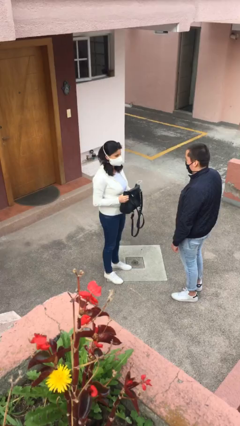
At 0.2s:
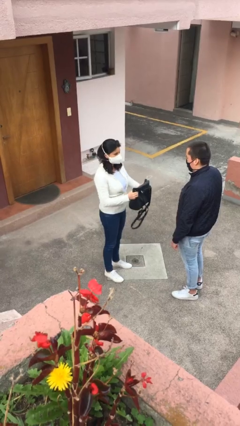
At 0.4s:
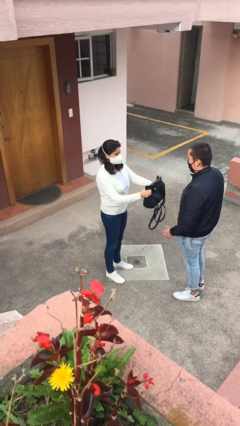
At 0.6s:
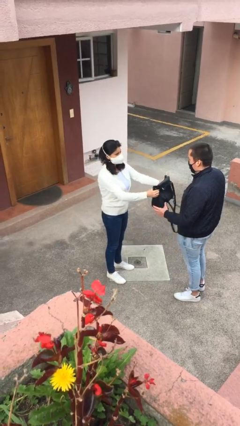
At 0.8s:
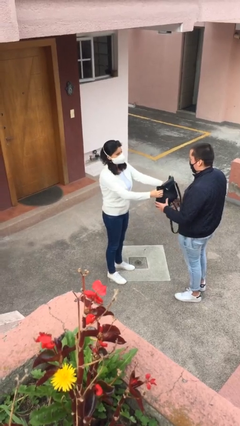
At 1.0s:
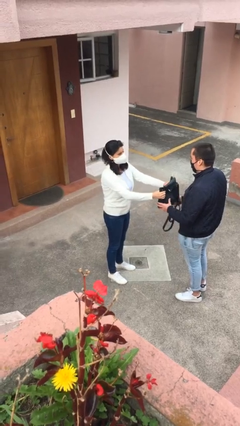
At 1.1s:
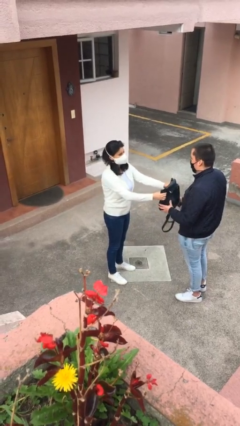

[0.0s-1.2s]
person transfers object to person

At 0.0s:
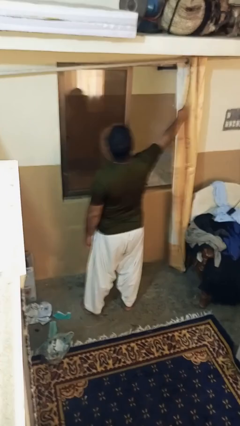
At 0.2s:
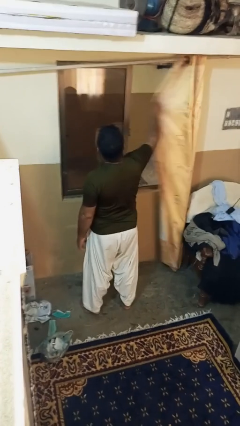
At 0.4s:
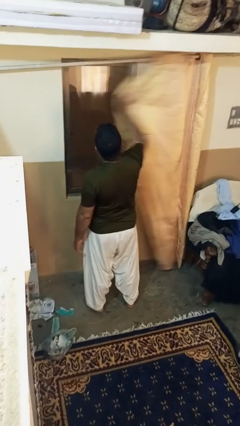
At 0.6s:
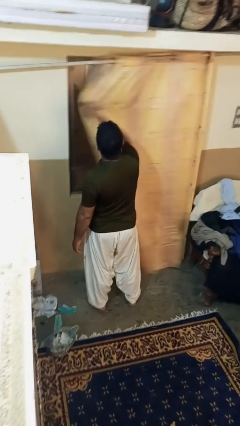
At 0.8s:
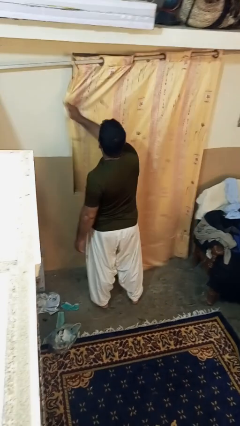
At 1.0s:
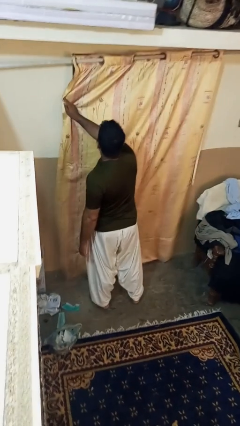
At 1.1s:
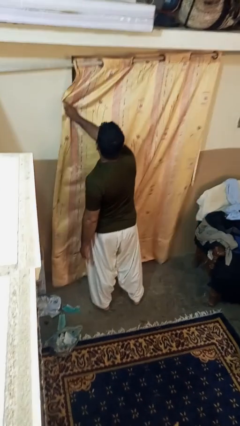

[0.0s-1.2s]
person closes curtains

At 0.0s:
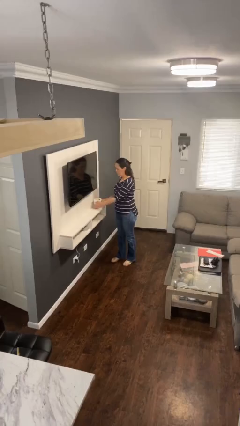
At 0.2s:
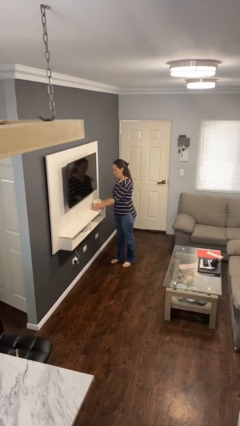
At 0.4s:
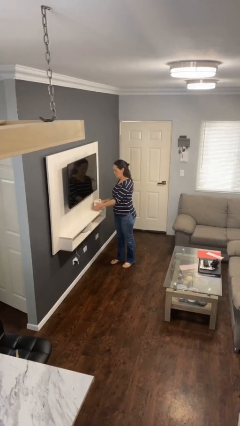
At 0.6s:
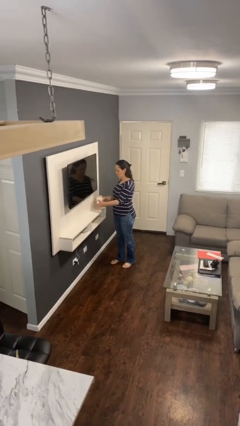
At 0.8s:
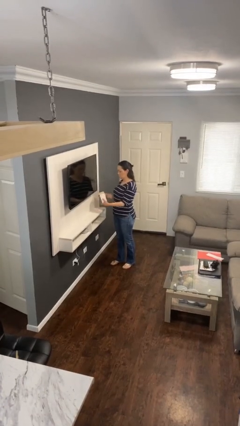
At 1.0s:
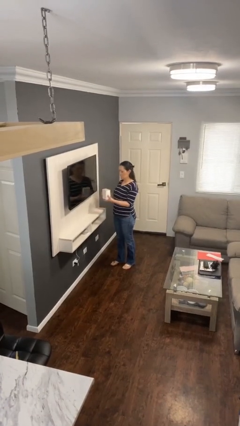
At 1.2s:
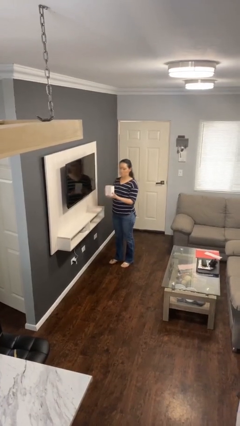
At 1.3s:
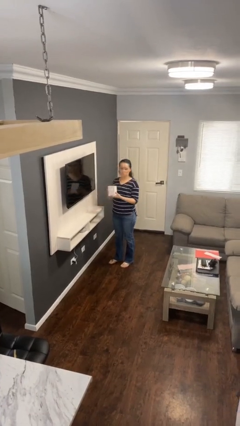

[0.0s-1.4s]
person picks up object from shelf

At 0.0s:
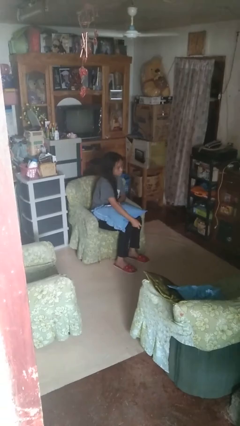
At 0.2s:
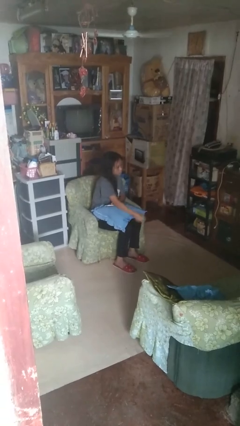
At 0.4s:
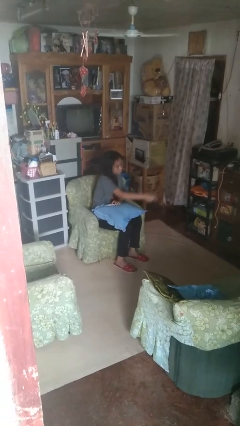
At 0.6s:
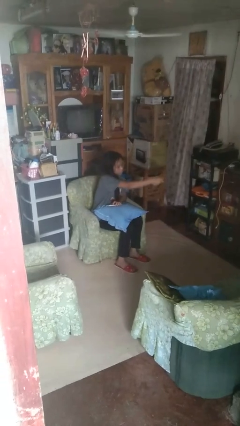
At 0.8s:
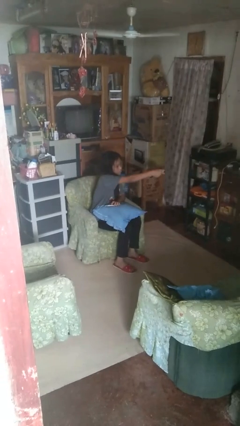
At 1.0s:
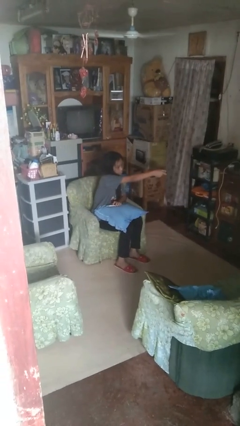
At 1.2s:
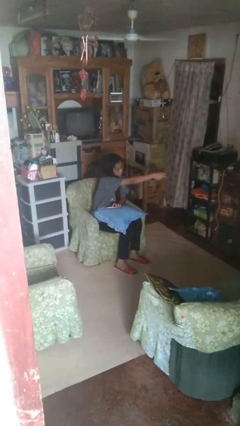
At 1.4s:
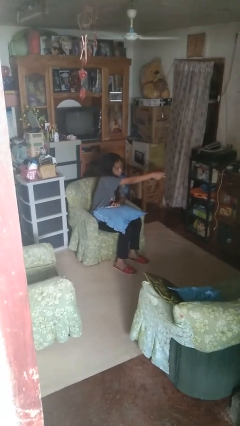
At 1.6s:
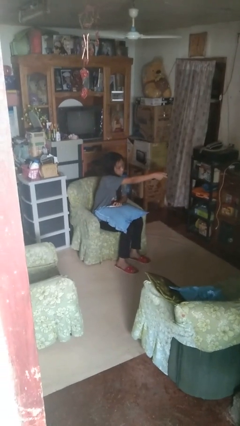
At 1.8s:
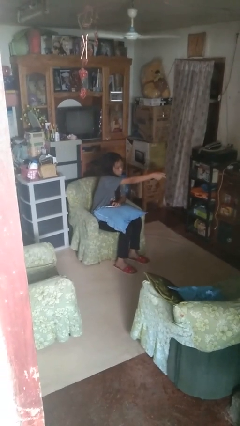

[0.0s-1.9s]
person uses television remote

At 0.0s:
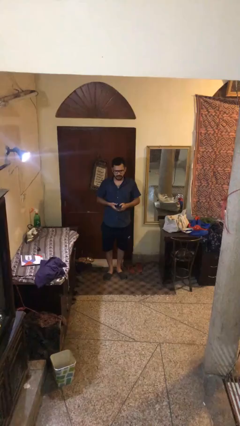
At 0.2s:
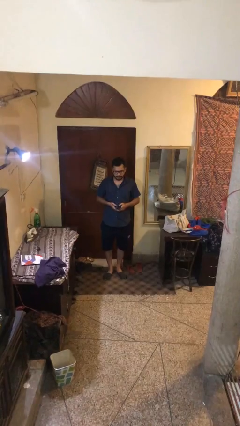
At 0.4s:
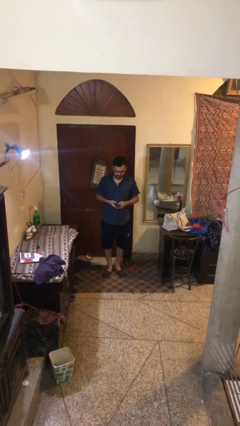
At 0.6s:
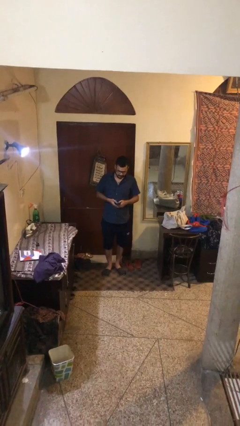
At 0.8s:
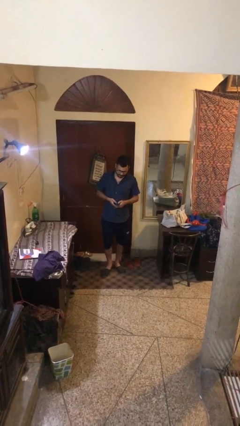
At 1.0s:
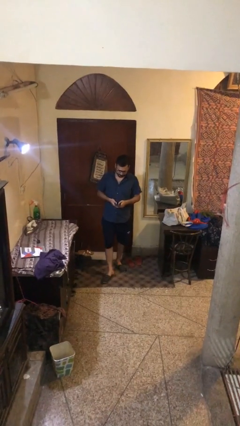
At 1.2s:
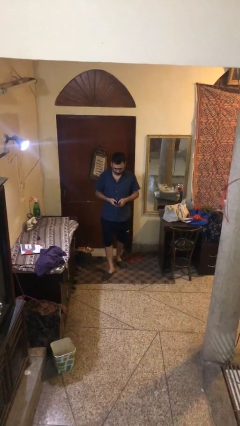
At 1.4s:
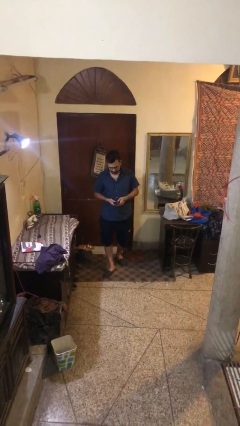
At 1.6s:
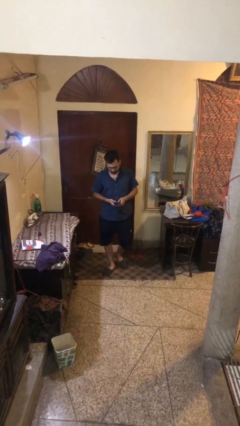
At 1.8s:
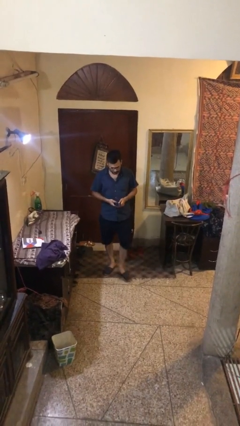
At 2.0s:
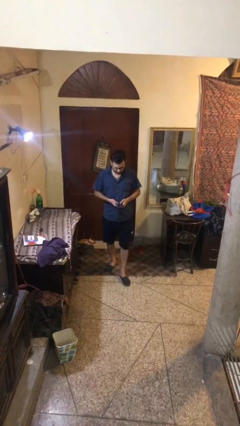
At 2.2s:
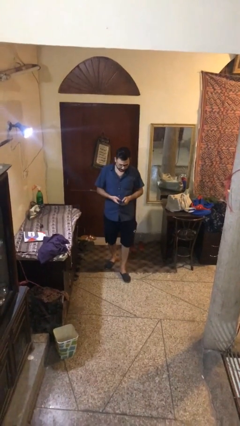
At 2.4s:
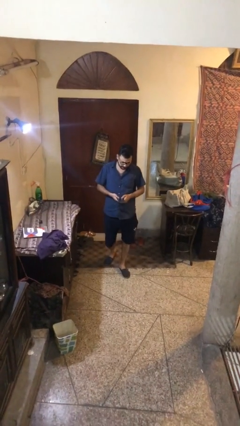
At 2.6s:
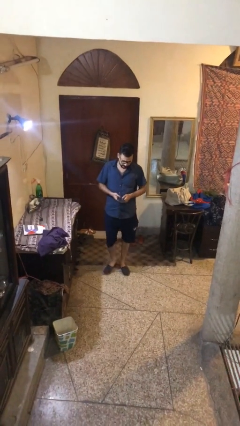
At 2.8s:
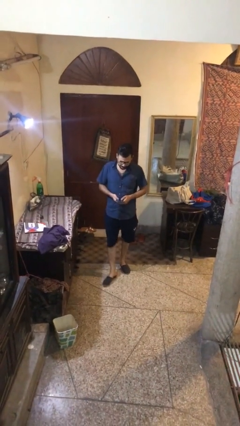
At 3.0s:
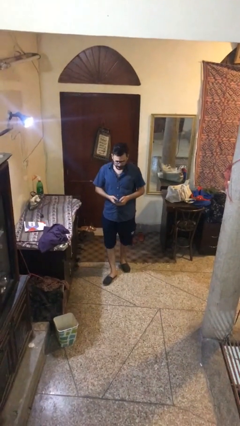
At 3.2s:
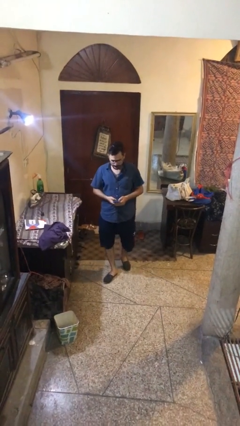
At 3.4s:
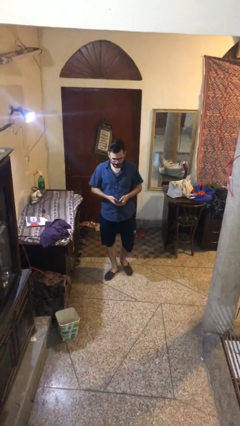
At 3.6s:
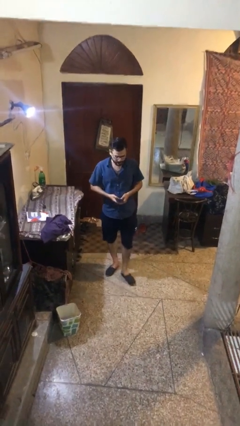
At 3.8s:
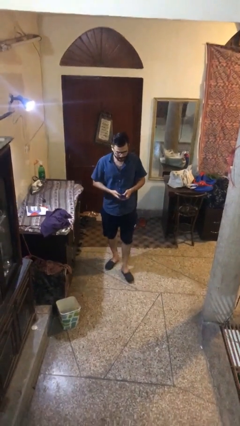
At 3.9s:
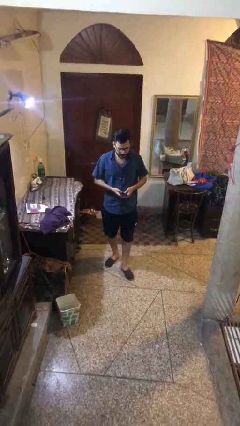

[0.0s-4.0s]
person texts on phone

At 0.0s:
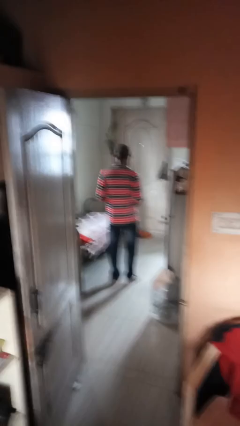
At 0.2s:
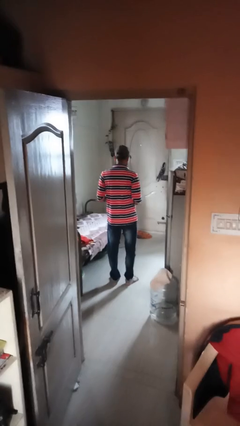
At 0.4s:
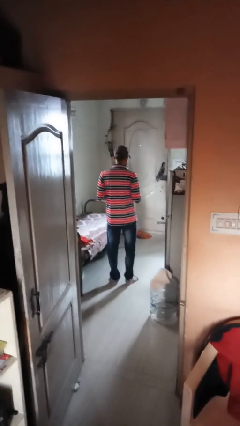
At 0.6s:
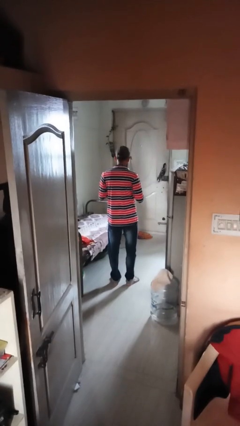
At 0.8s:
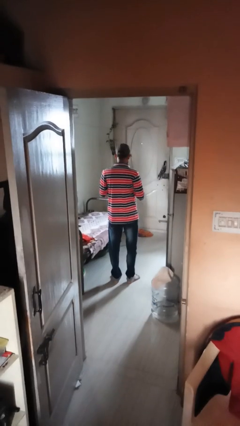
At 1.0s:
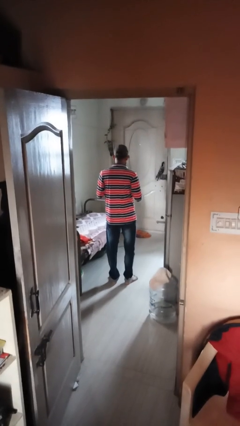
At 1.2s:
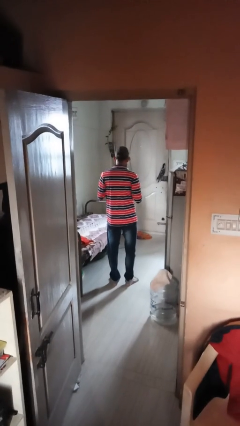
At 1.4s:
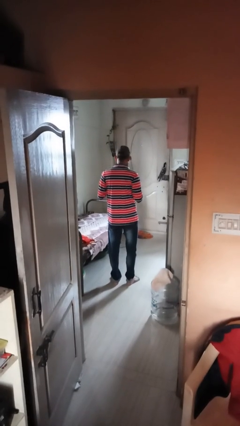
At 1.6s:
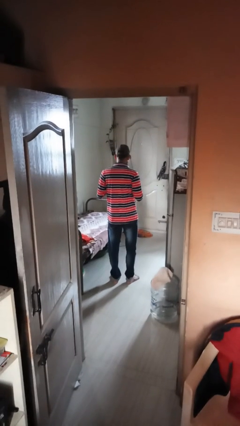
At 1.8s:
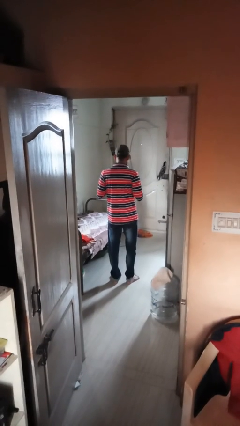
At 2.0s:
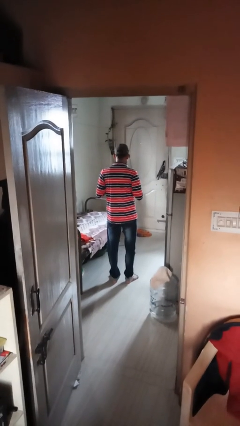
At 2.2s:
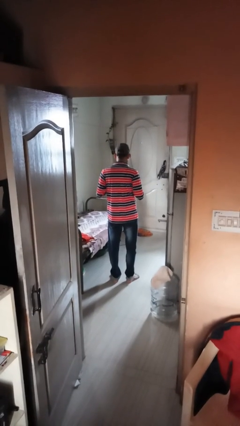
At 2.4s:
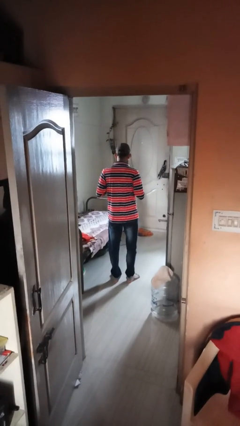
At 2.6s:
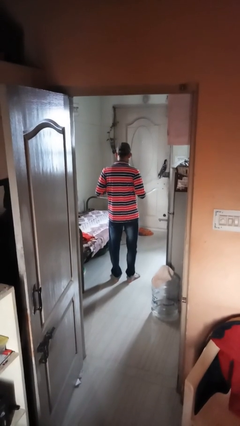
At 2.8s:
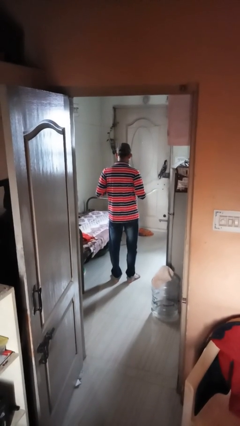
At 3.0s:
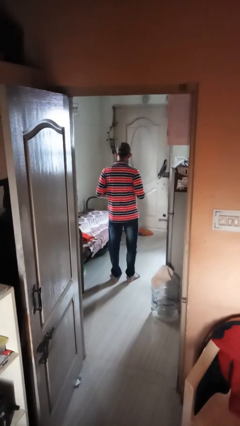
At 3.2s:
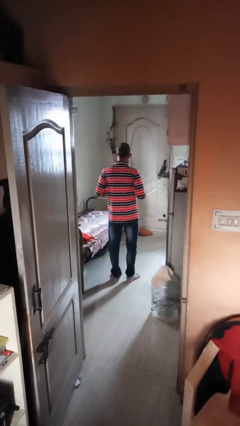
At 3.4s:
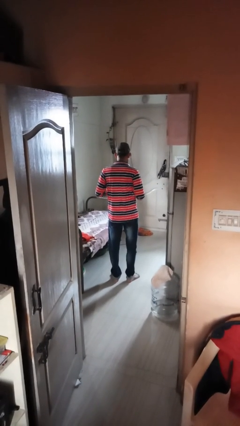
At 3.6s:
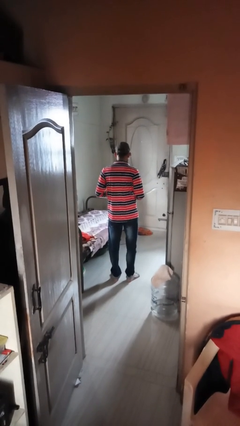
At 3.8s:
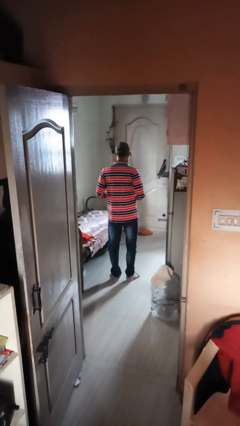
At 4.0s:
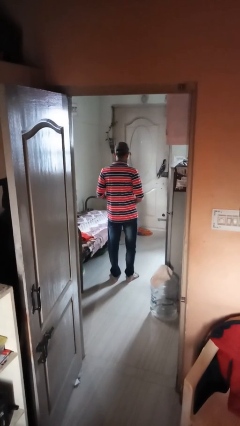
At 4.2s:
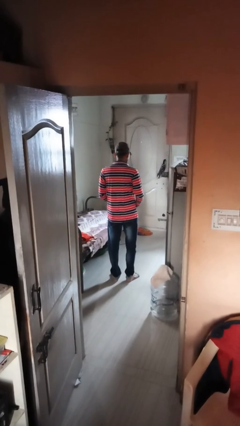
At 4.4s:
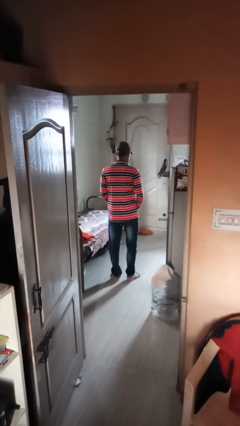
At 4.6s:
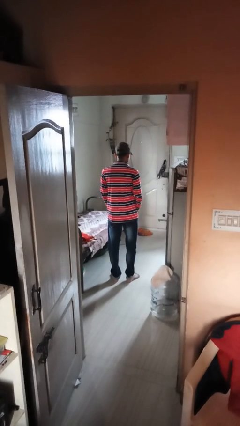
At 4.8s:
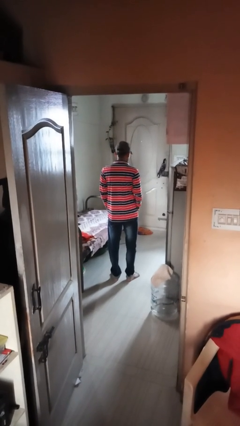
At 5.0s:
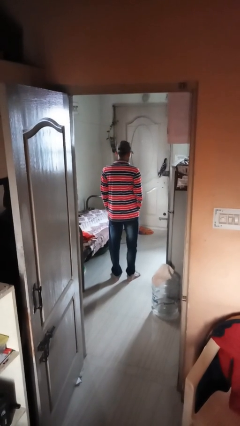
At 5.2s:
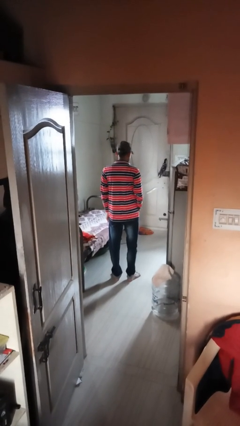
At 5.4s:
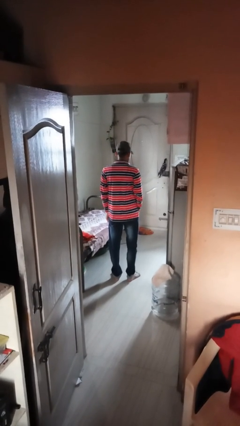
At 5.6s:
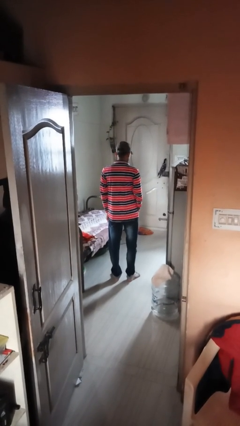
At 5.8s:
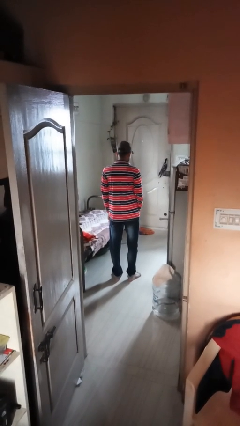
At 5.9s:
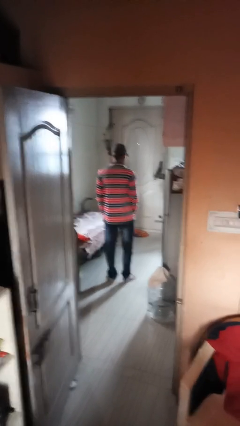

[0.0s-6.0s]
person unbuttons shirt

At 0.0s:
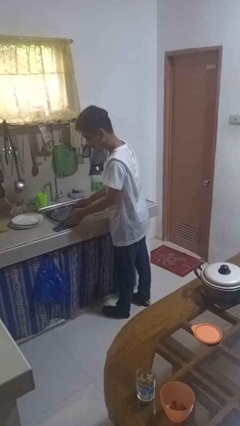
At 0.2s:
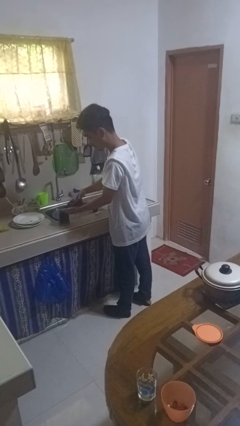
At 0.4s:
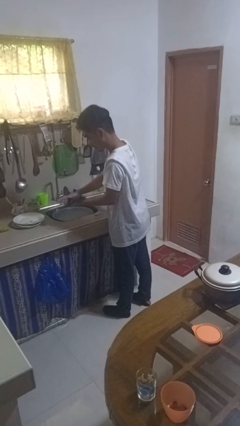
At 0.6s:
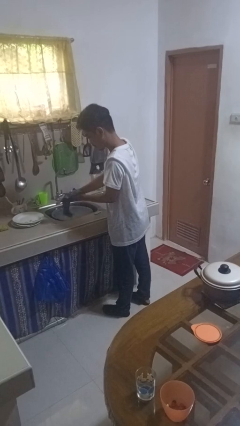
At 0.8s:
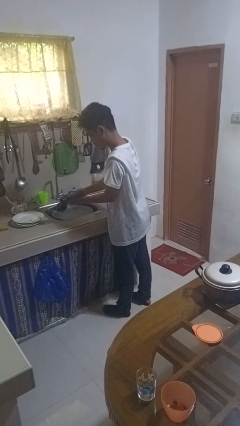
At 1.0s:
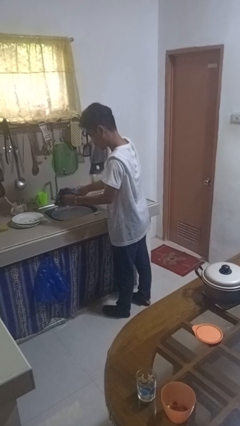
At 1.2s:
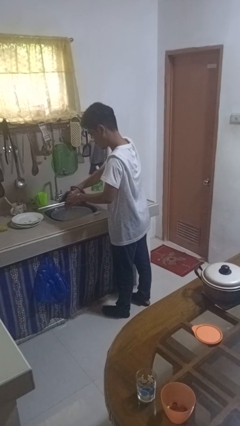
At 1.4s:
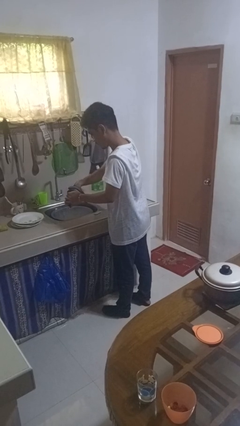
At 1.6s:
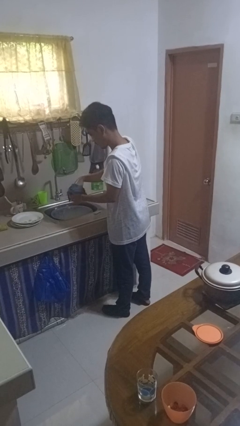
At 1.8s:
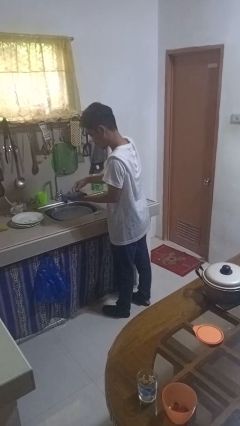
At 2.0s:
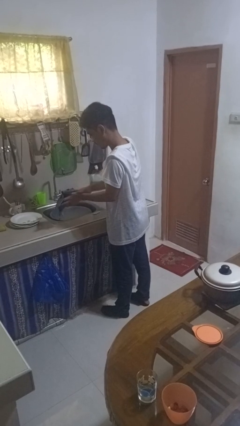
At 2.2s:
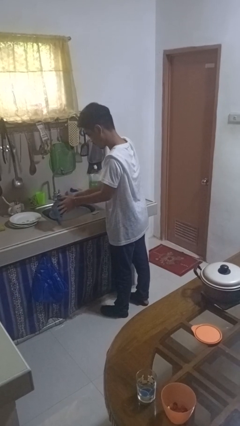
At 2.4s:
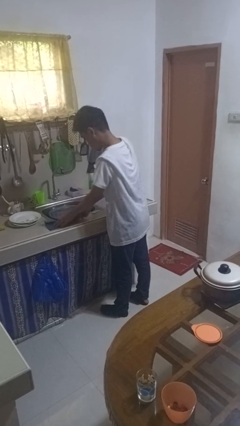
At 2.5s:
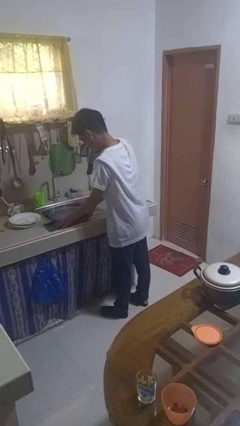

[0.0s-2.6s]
person dries hands with towel
